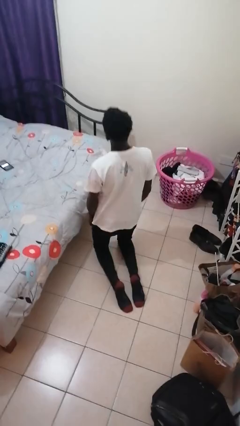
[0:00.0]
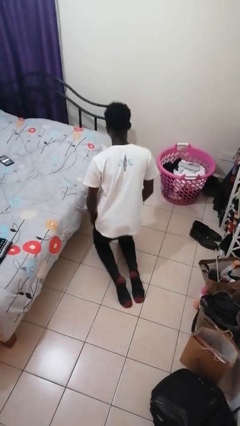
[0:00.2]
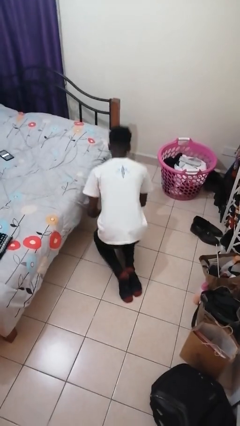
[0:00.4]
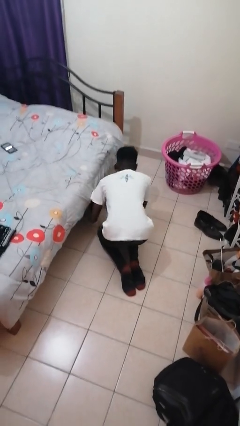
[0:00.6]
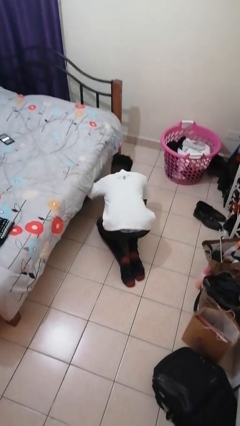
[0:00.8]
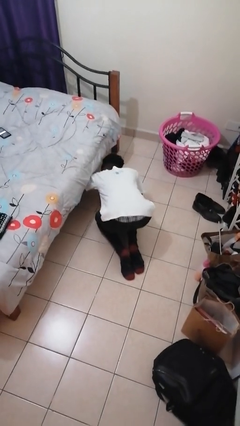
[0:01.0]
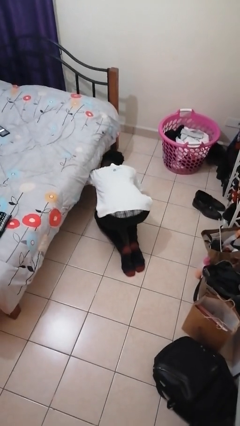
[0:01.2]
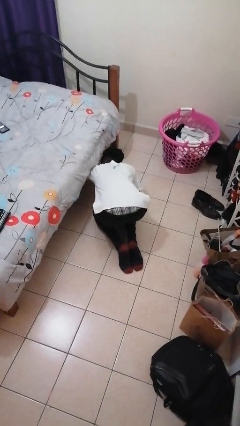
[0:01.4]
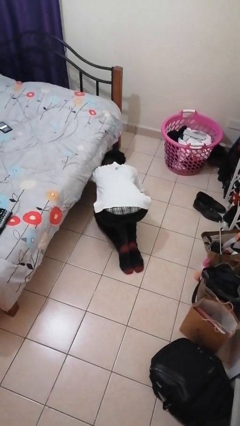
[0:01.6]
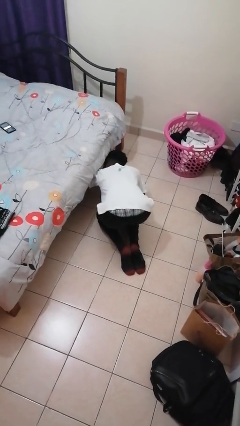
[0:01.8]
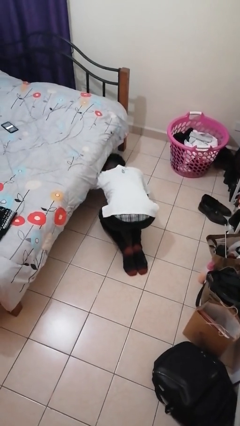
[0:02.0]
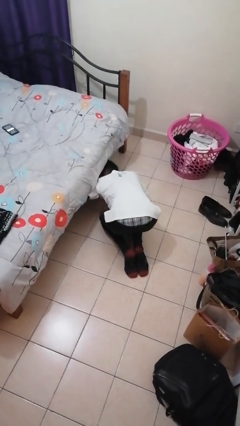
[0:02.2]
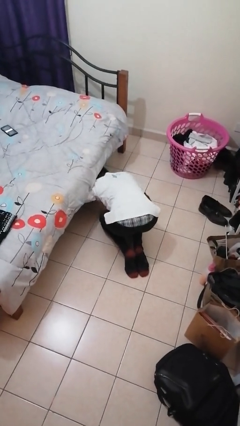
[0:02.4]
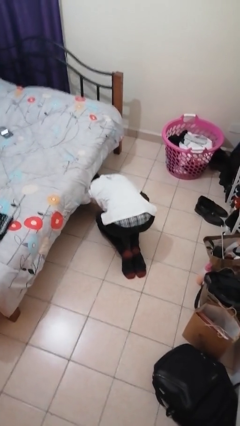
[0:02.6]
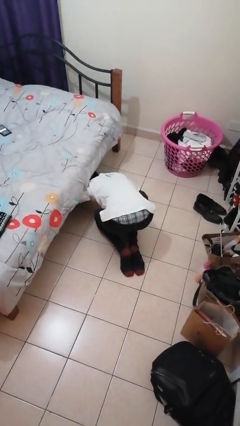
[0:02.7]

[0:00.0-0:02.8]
person searches under bed

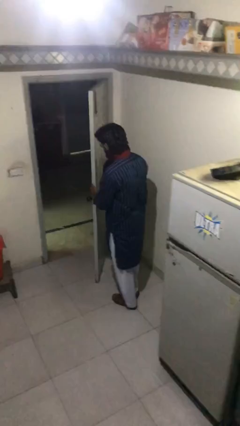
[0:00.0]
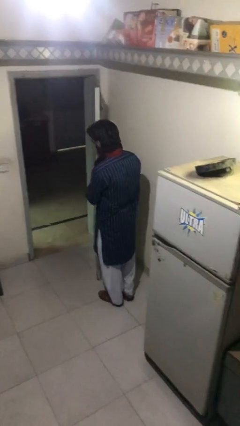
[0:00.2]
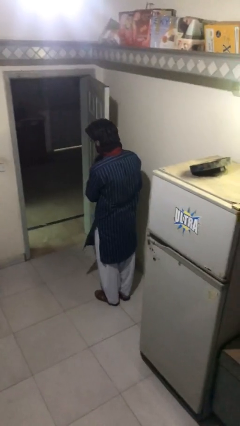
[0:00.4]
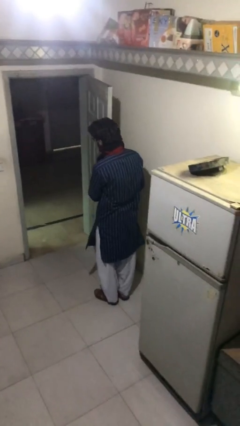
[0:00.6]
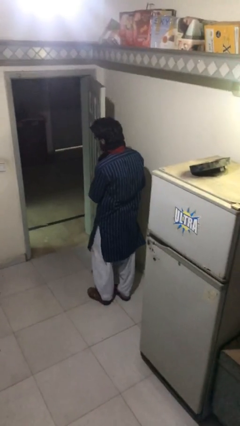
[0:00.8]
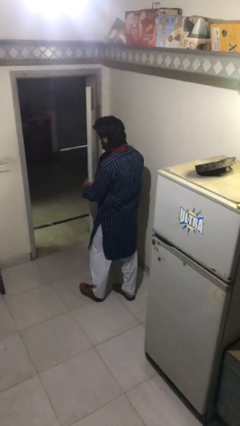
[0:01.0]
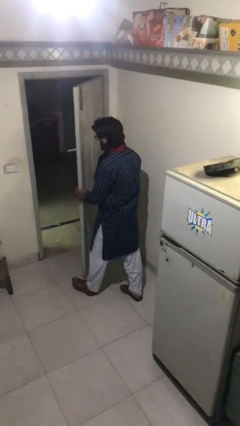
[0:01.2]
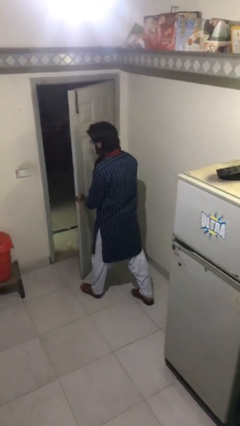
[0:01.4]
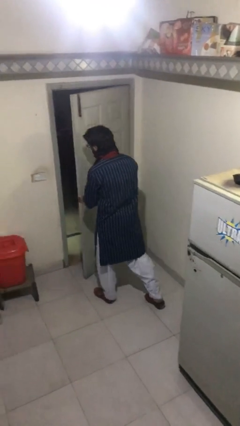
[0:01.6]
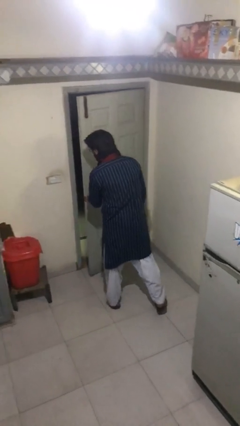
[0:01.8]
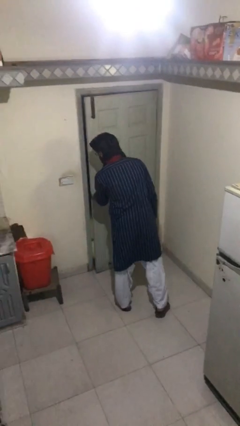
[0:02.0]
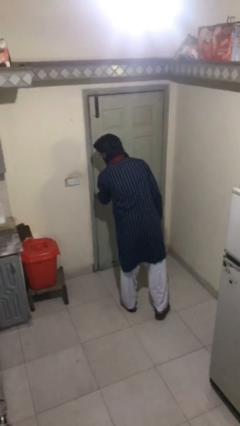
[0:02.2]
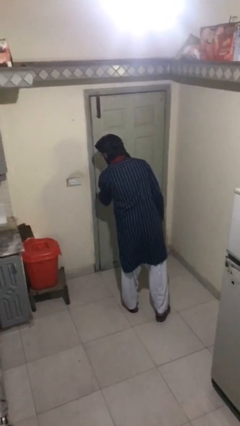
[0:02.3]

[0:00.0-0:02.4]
person closes facility door

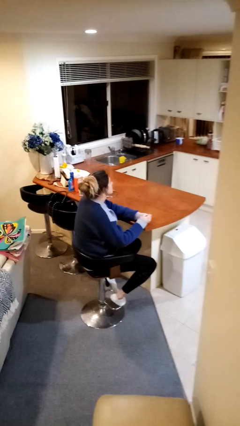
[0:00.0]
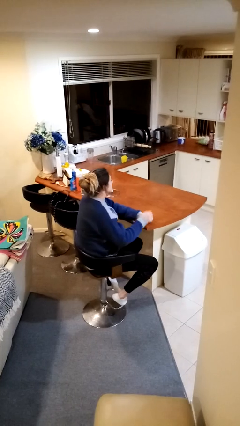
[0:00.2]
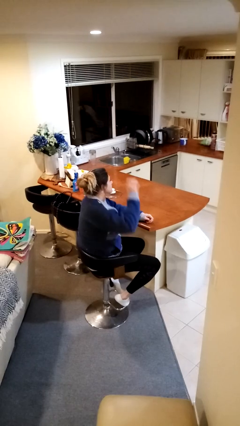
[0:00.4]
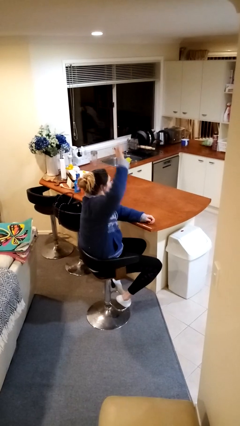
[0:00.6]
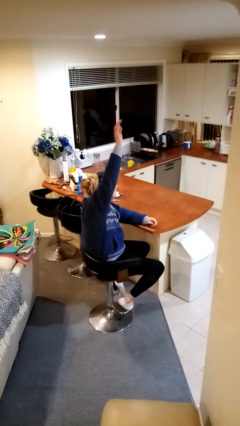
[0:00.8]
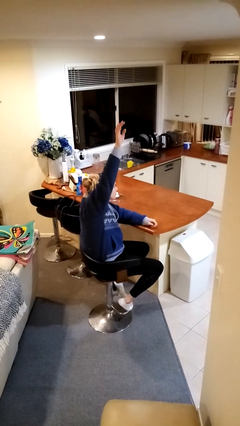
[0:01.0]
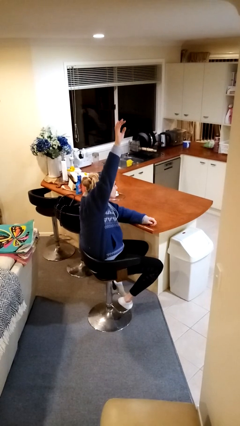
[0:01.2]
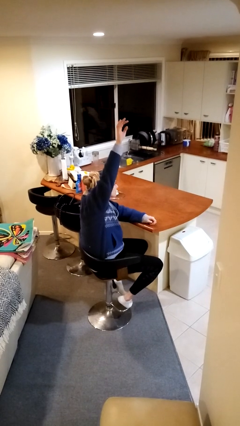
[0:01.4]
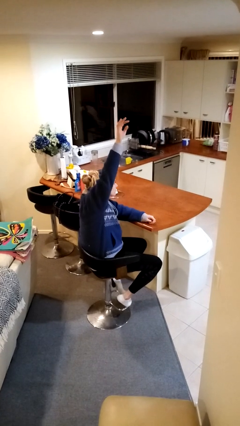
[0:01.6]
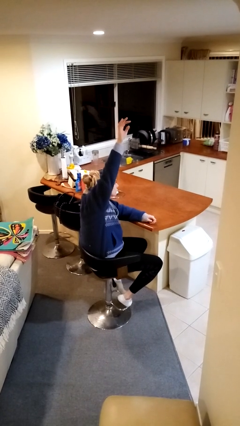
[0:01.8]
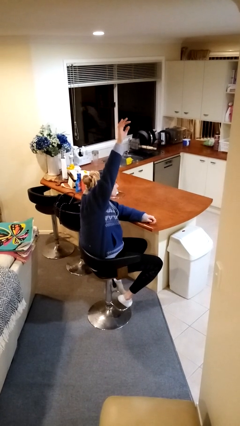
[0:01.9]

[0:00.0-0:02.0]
person gestures raise hand

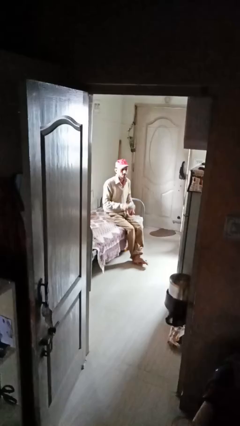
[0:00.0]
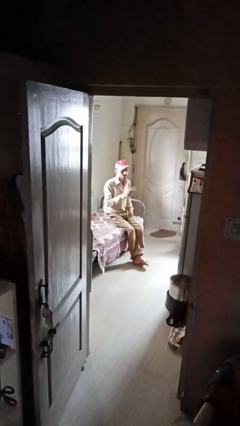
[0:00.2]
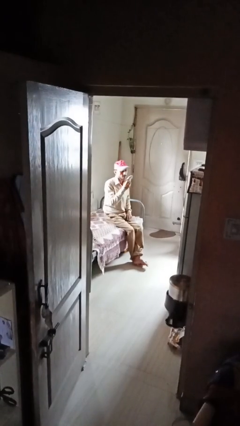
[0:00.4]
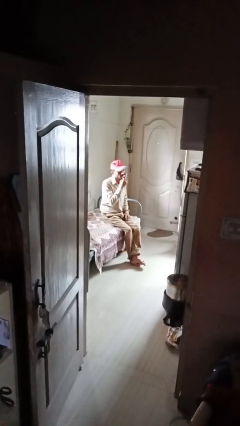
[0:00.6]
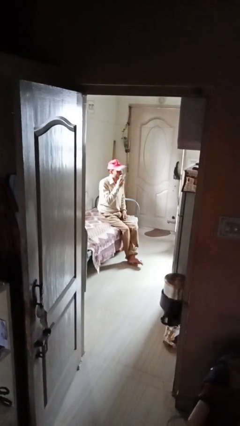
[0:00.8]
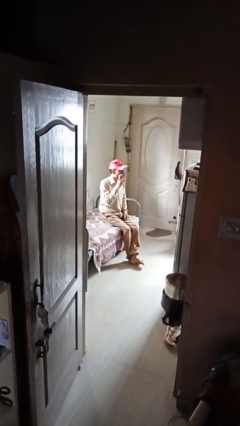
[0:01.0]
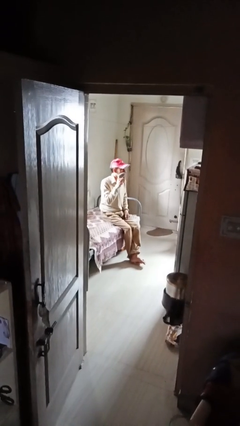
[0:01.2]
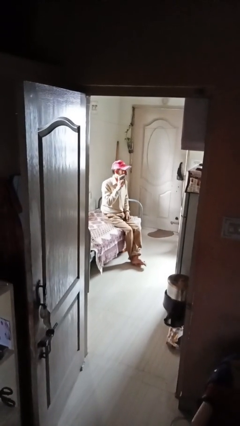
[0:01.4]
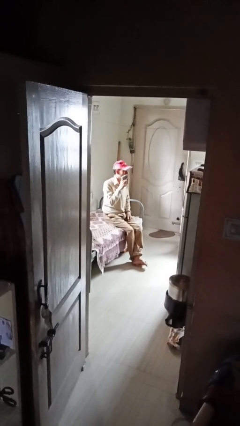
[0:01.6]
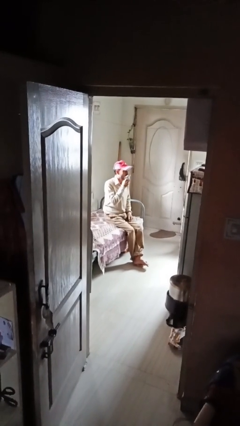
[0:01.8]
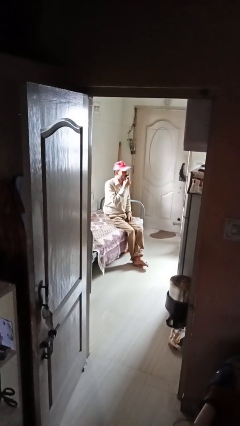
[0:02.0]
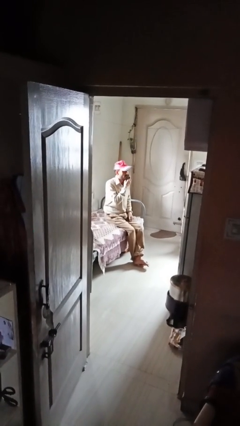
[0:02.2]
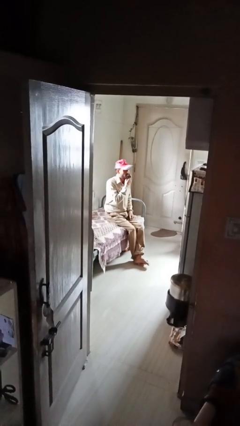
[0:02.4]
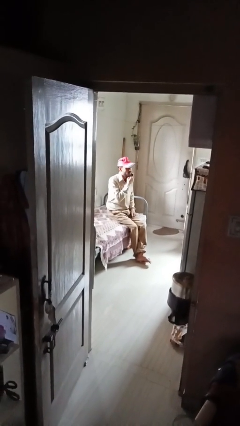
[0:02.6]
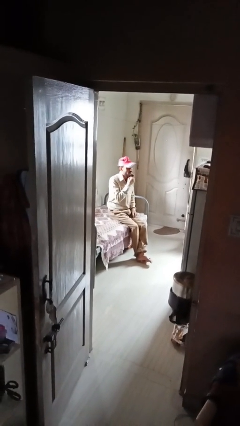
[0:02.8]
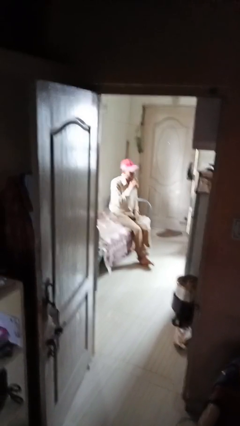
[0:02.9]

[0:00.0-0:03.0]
person wipes mouth with napkin

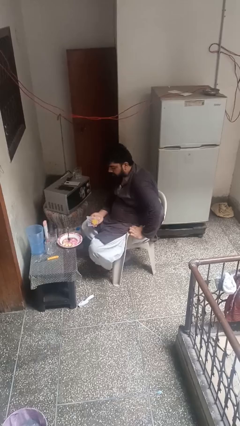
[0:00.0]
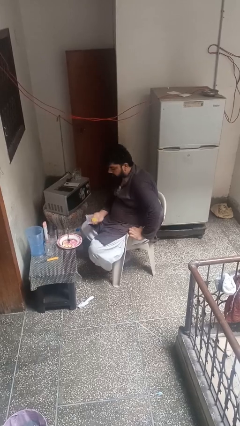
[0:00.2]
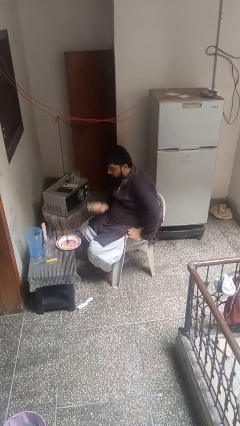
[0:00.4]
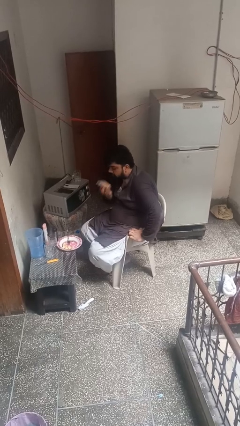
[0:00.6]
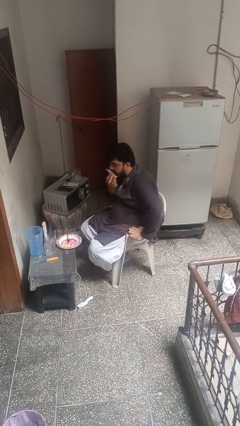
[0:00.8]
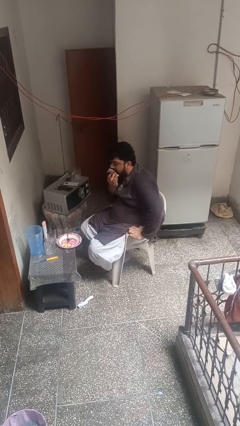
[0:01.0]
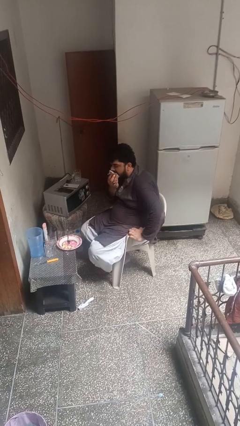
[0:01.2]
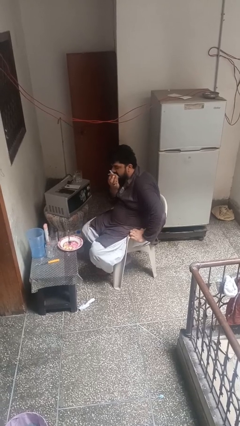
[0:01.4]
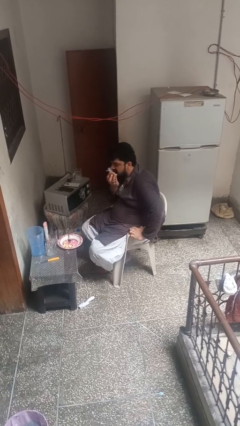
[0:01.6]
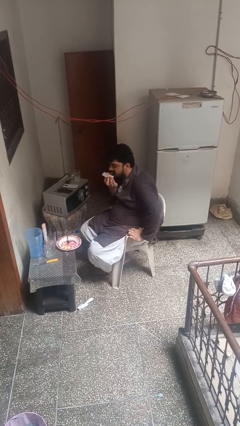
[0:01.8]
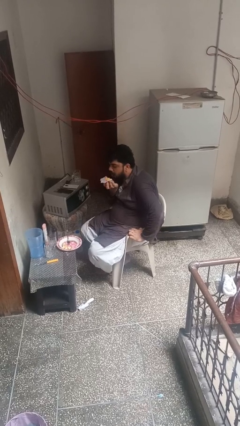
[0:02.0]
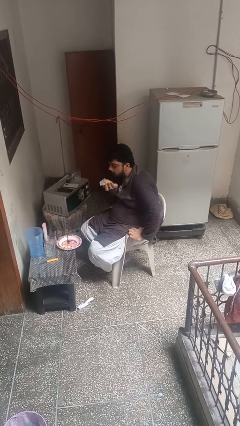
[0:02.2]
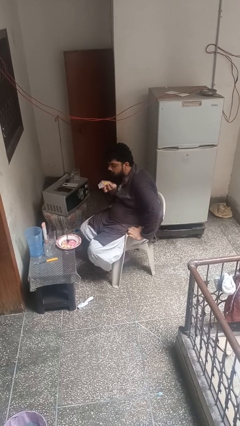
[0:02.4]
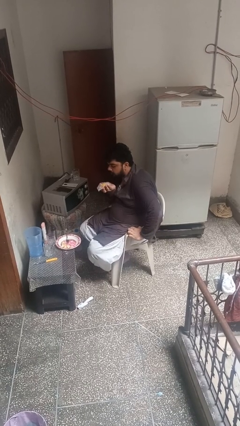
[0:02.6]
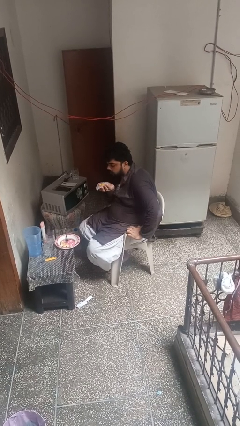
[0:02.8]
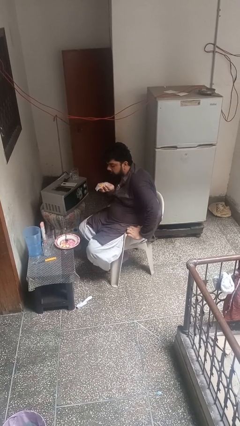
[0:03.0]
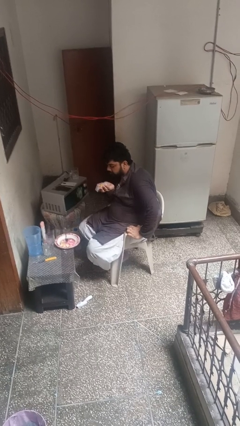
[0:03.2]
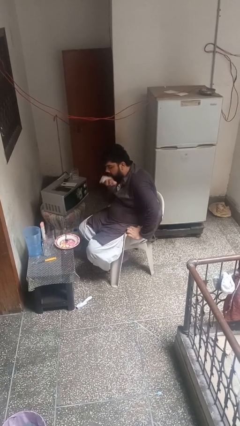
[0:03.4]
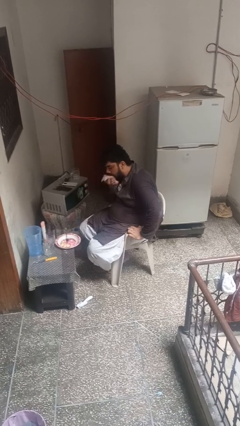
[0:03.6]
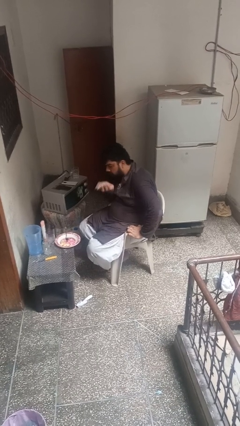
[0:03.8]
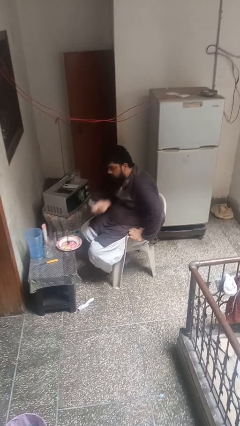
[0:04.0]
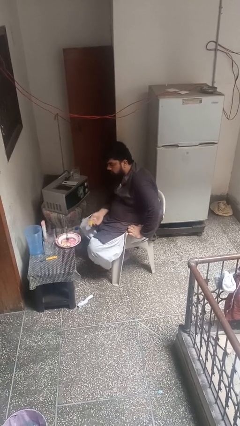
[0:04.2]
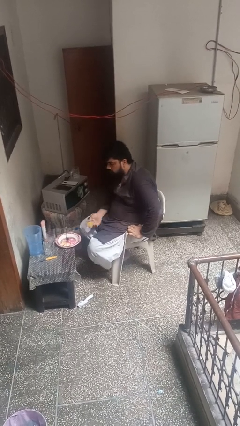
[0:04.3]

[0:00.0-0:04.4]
person eats with hands

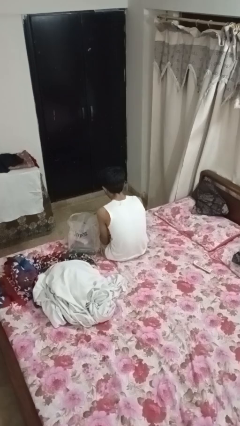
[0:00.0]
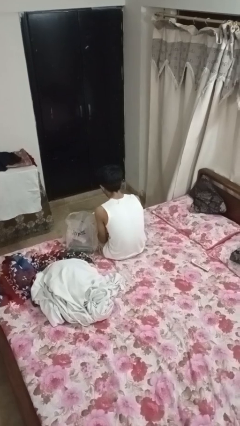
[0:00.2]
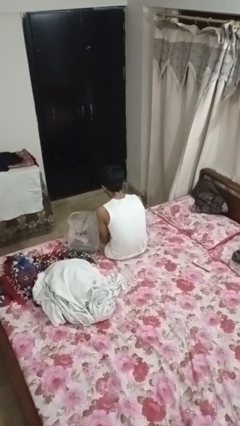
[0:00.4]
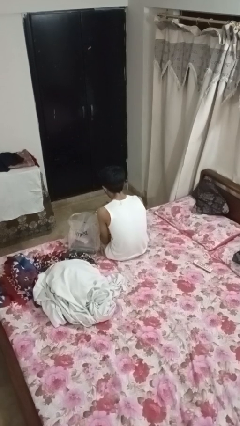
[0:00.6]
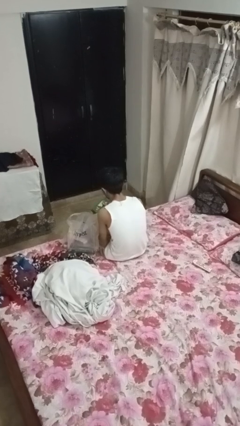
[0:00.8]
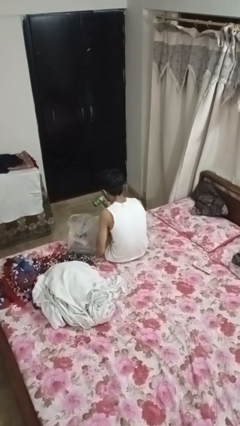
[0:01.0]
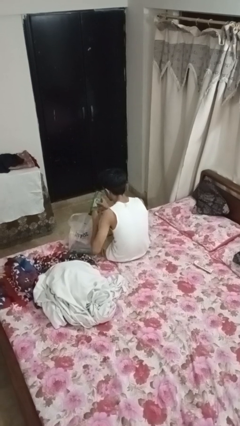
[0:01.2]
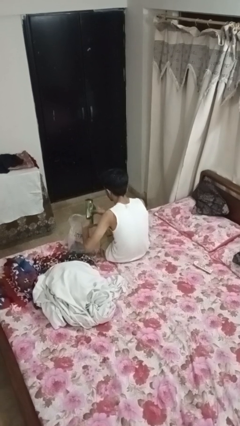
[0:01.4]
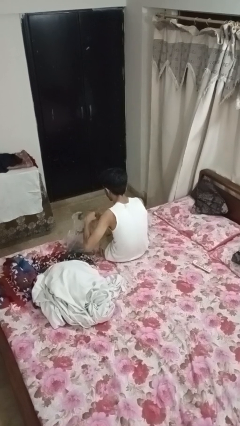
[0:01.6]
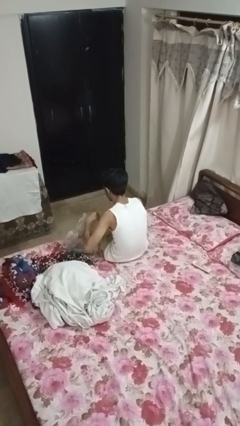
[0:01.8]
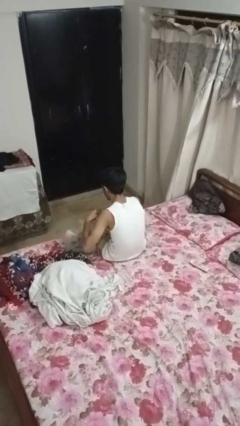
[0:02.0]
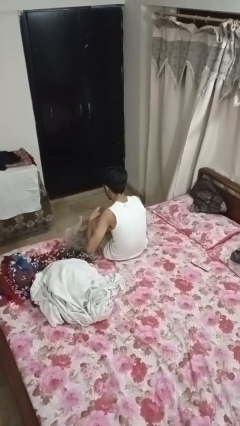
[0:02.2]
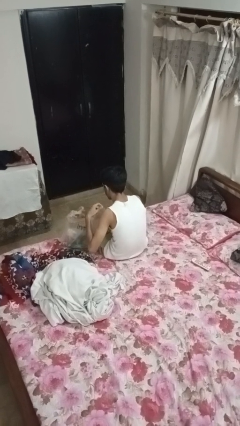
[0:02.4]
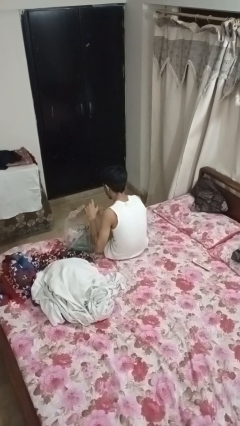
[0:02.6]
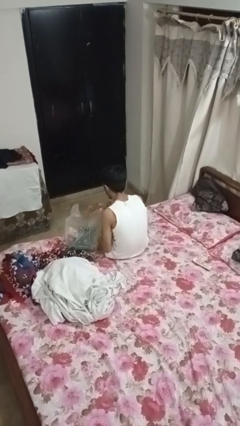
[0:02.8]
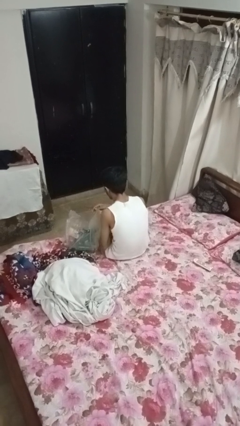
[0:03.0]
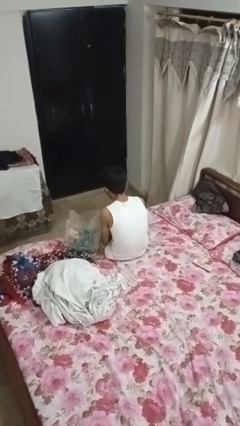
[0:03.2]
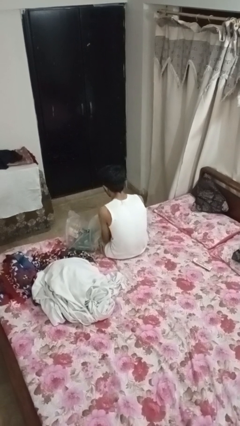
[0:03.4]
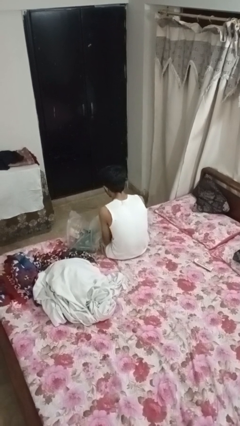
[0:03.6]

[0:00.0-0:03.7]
person puts object into bag
